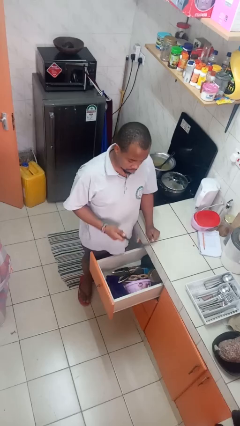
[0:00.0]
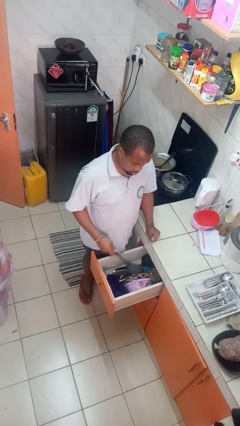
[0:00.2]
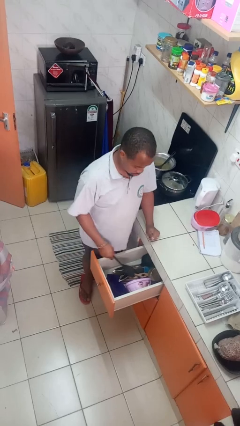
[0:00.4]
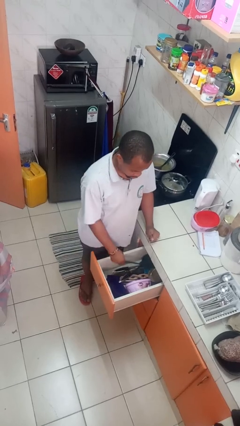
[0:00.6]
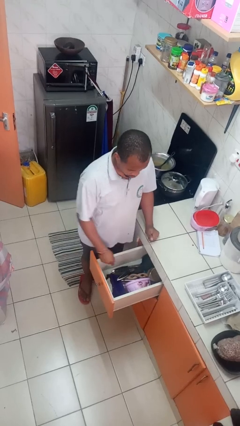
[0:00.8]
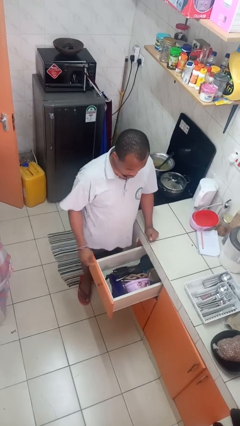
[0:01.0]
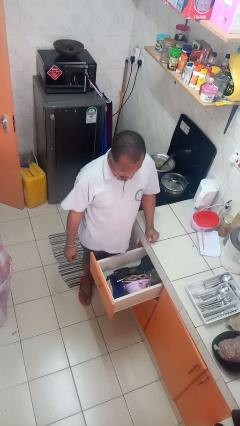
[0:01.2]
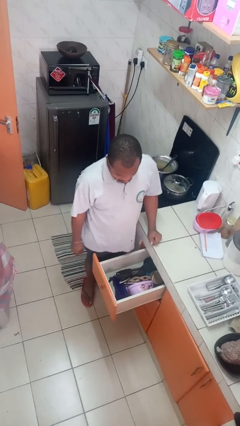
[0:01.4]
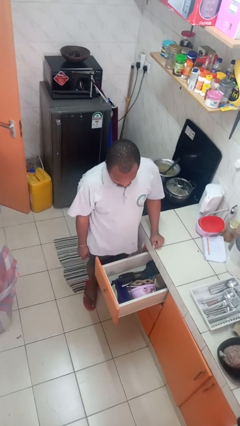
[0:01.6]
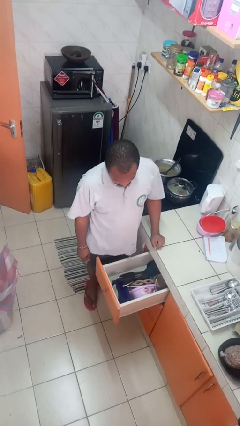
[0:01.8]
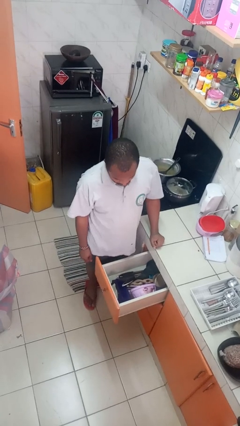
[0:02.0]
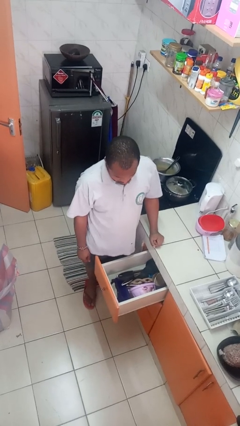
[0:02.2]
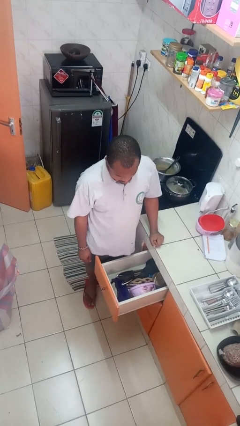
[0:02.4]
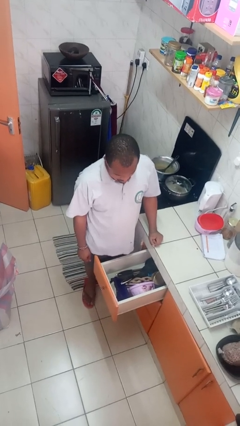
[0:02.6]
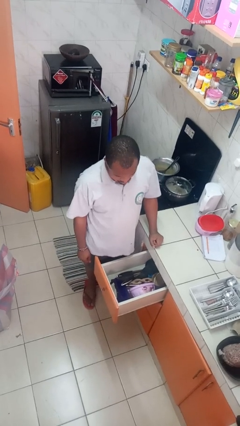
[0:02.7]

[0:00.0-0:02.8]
person puts object into kitchen drawer

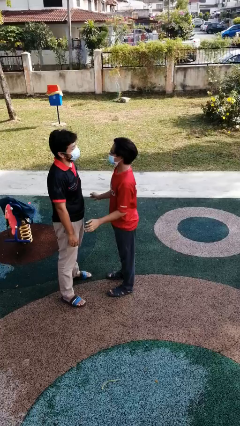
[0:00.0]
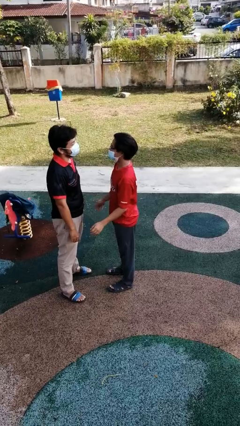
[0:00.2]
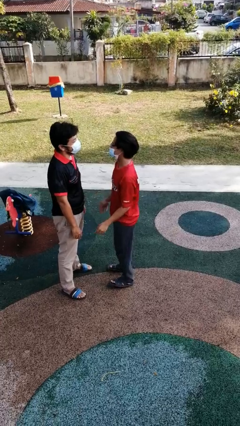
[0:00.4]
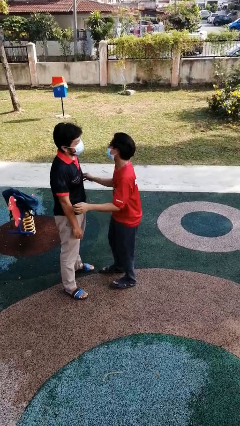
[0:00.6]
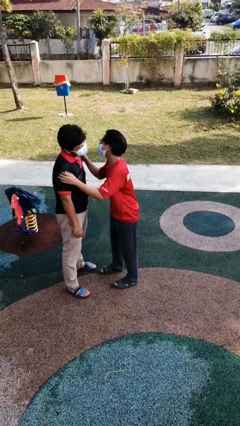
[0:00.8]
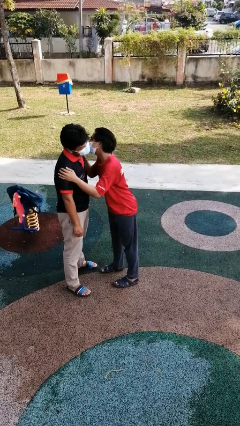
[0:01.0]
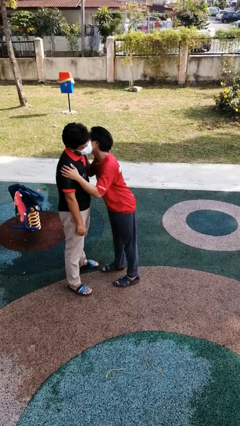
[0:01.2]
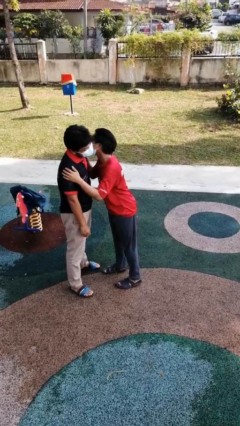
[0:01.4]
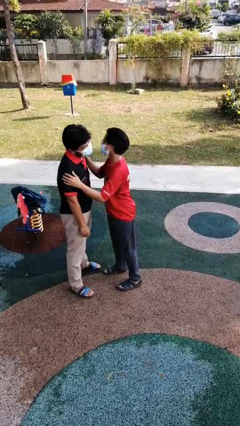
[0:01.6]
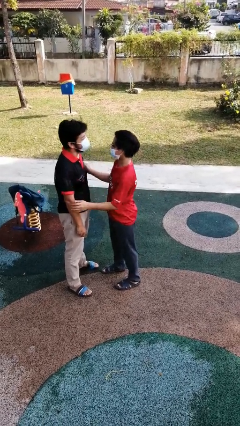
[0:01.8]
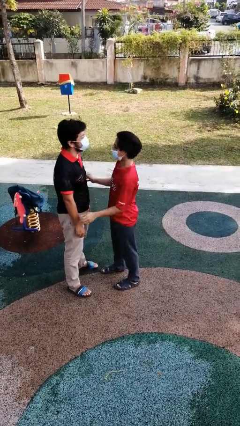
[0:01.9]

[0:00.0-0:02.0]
person kisses cheek of person

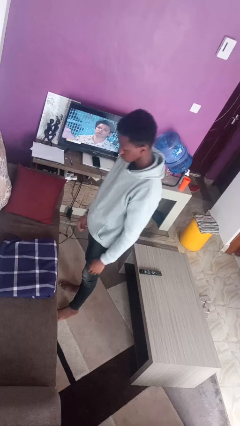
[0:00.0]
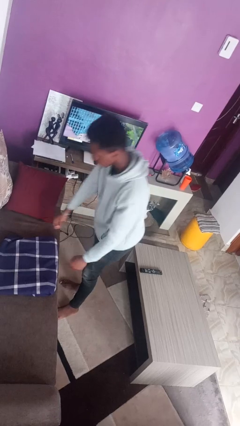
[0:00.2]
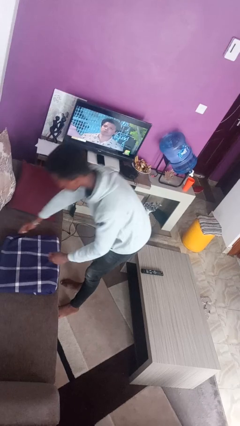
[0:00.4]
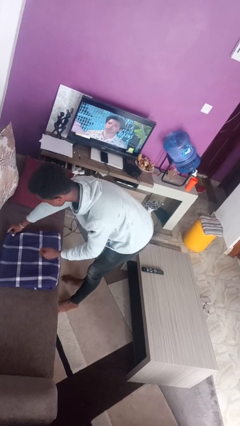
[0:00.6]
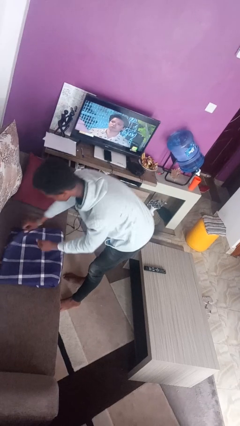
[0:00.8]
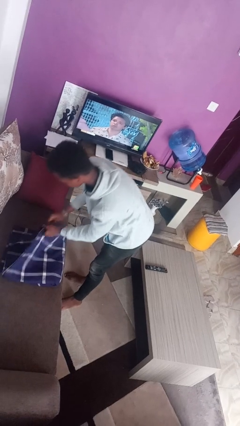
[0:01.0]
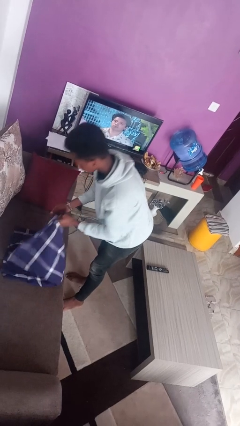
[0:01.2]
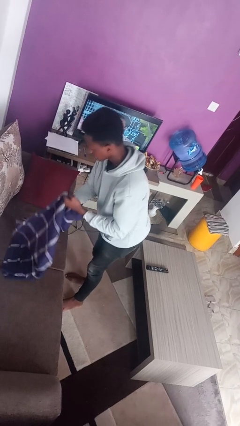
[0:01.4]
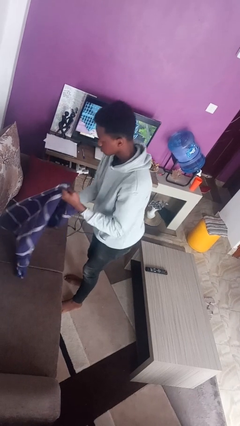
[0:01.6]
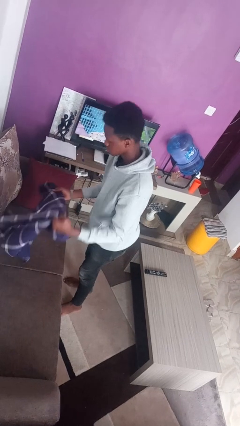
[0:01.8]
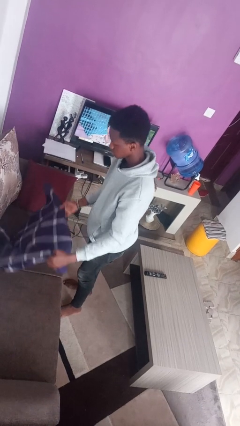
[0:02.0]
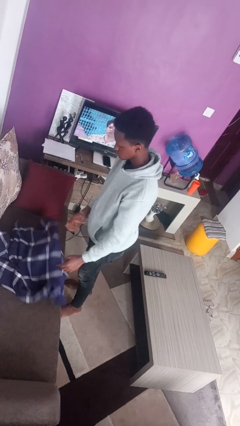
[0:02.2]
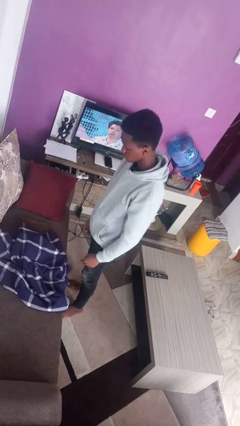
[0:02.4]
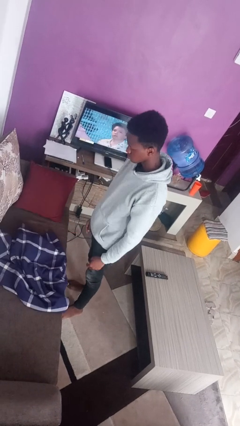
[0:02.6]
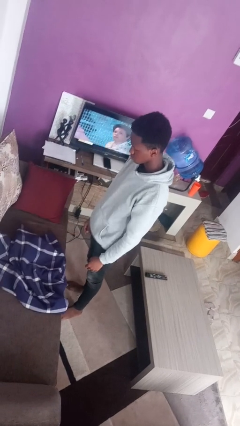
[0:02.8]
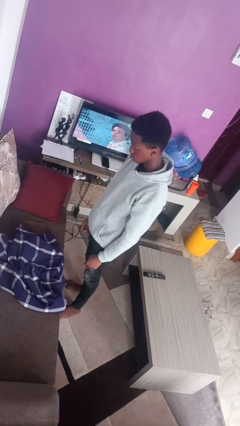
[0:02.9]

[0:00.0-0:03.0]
person unfolds blanket

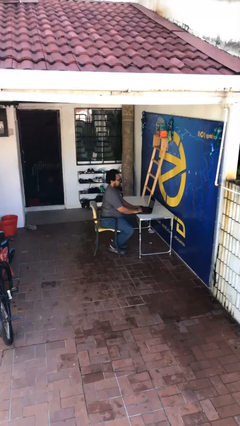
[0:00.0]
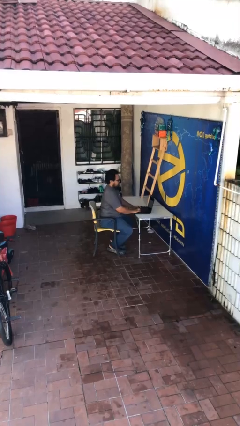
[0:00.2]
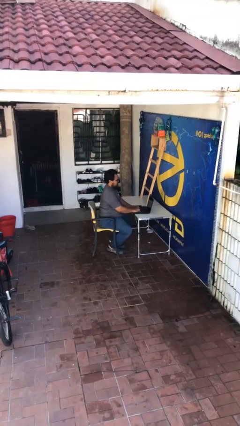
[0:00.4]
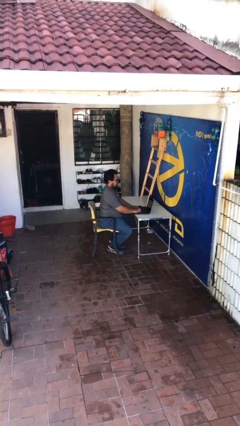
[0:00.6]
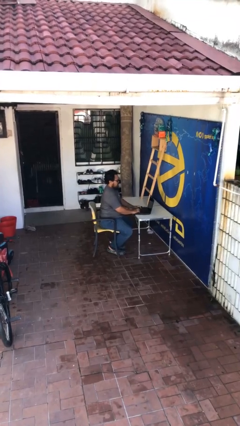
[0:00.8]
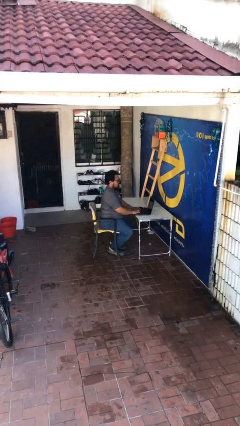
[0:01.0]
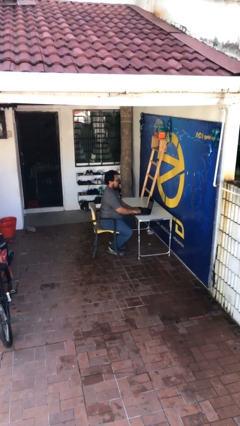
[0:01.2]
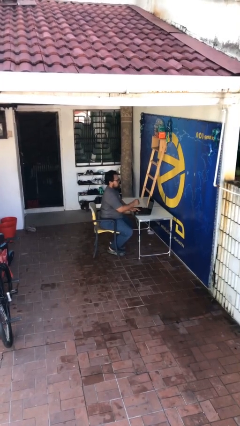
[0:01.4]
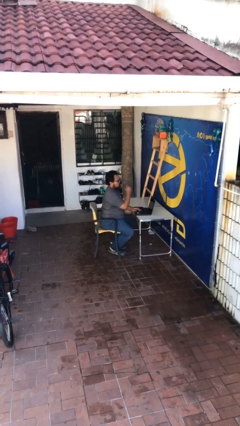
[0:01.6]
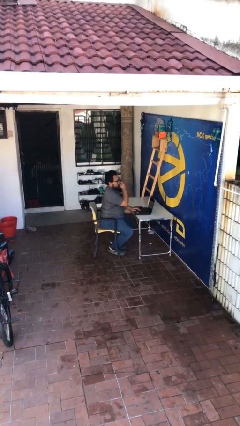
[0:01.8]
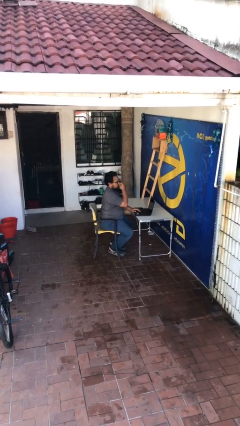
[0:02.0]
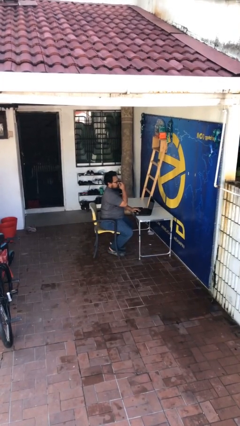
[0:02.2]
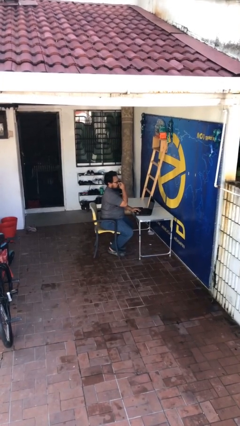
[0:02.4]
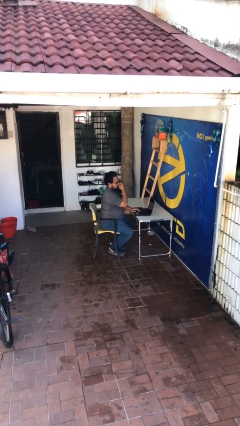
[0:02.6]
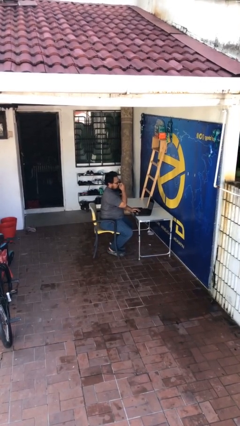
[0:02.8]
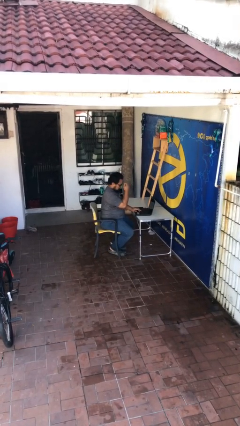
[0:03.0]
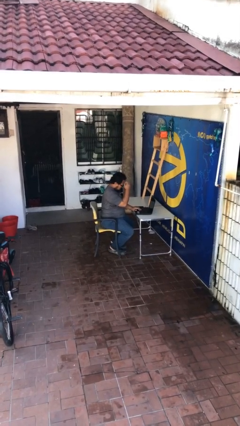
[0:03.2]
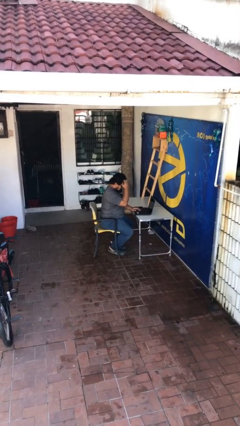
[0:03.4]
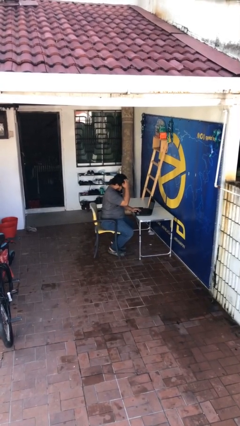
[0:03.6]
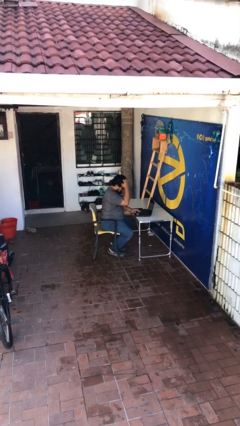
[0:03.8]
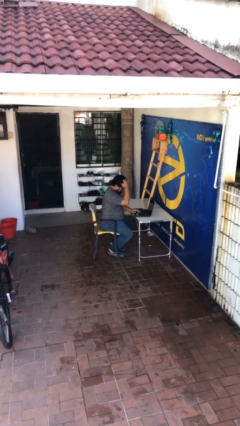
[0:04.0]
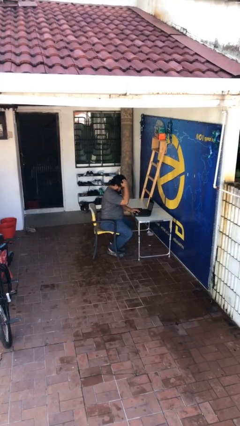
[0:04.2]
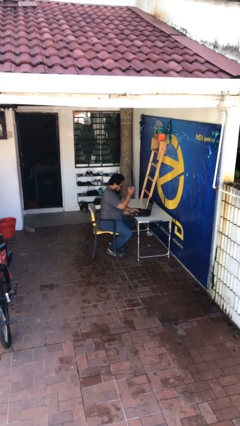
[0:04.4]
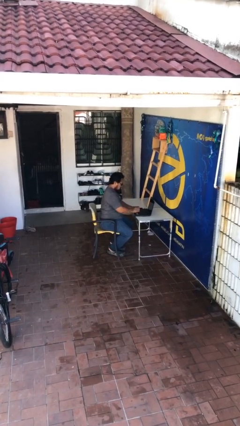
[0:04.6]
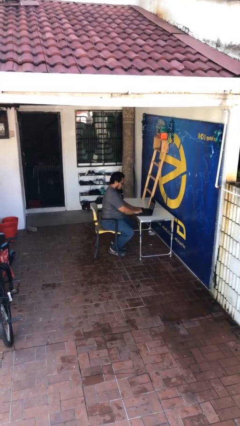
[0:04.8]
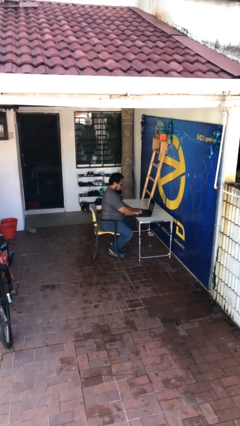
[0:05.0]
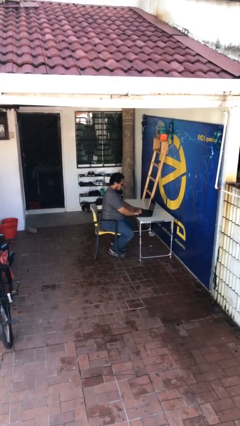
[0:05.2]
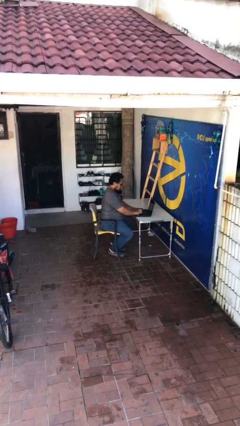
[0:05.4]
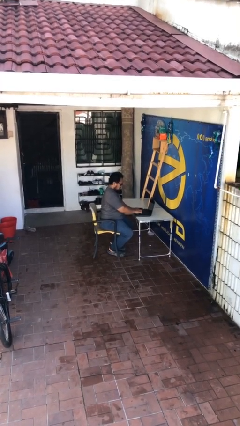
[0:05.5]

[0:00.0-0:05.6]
person interacts with laptop

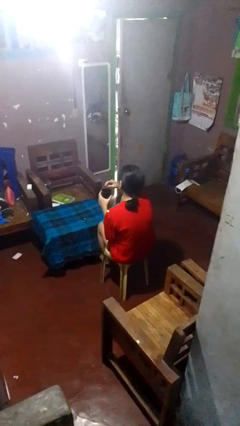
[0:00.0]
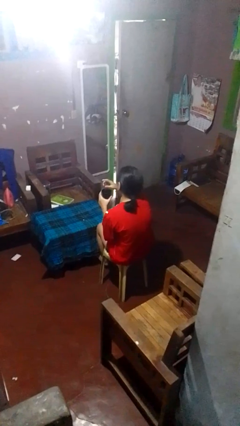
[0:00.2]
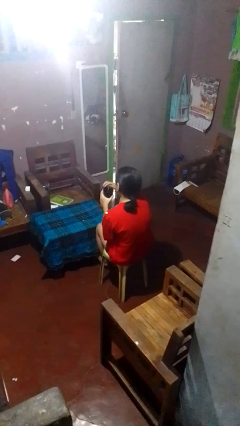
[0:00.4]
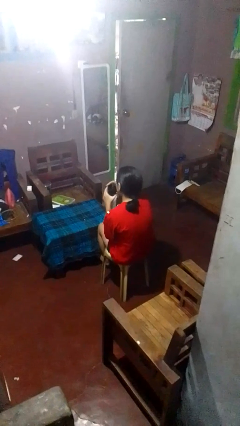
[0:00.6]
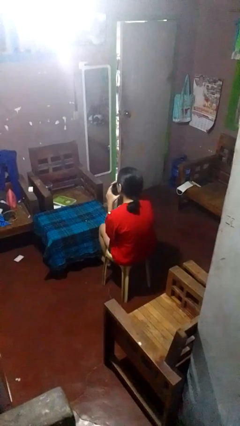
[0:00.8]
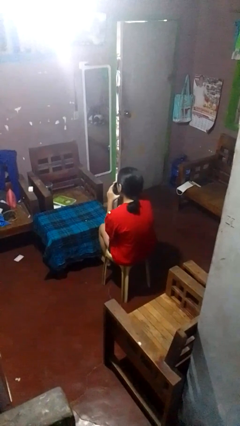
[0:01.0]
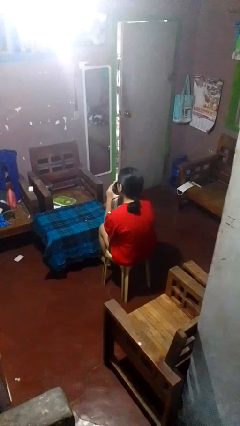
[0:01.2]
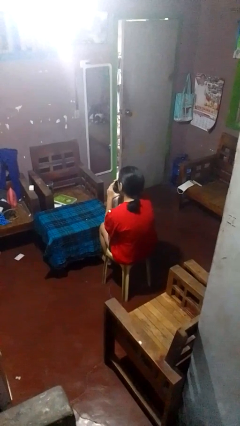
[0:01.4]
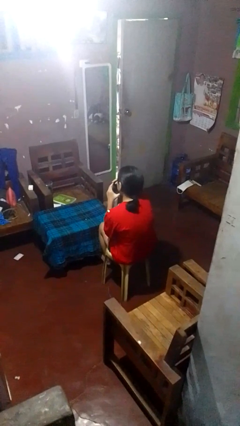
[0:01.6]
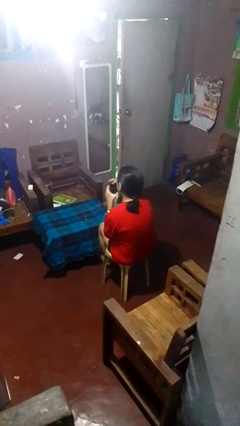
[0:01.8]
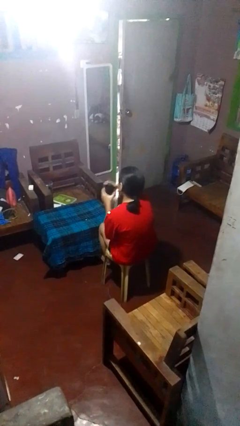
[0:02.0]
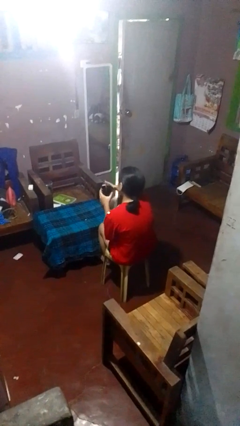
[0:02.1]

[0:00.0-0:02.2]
person drinks from mug

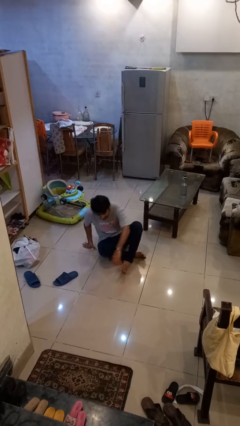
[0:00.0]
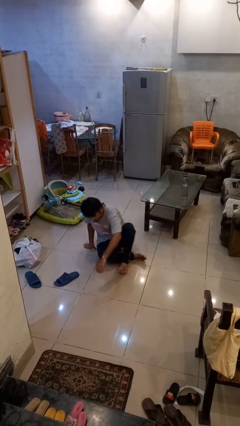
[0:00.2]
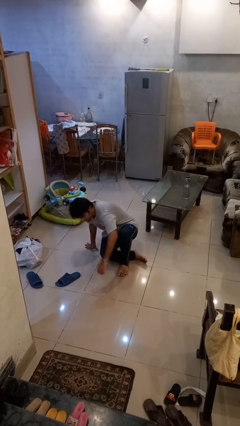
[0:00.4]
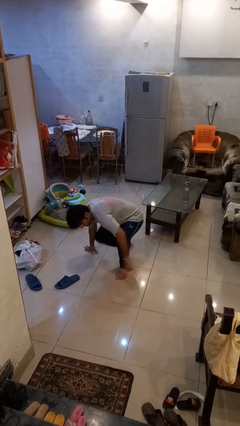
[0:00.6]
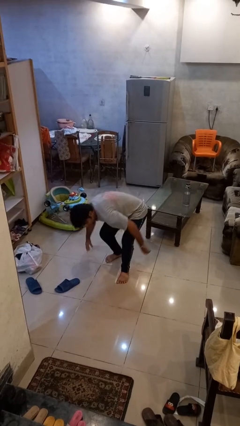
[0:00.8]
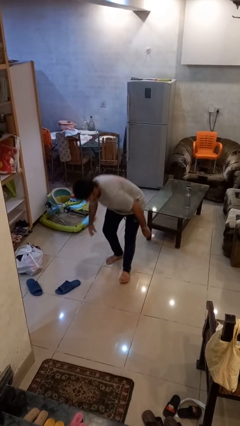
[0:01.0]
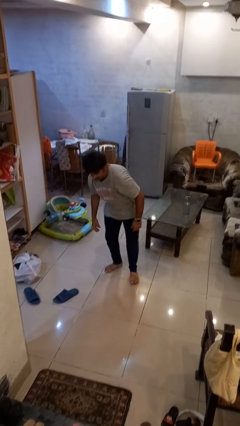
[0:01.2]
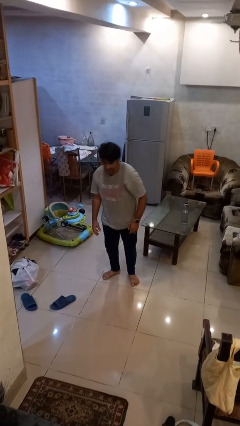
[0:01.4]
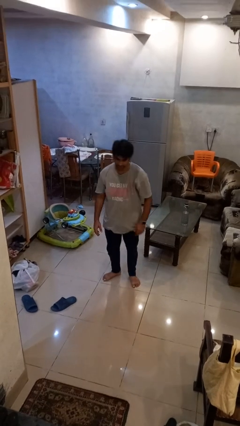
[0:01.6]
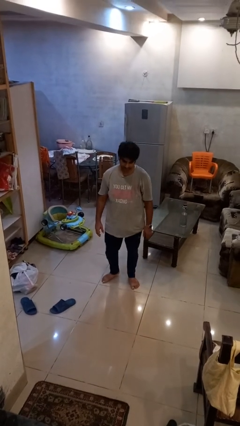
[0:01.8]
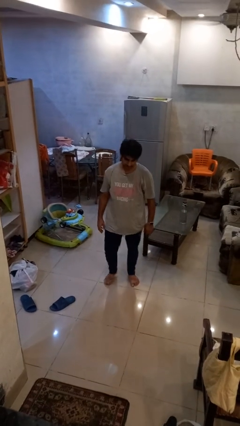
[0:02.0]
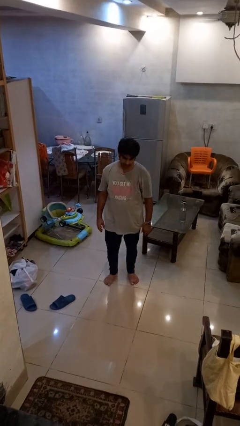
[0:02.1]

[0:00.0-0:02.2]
person stands up from floor
